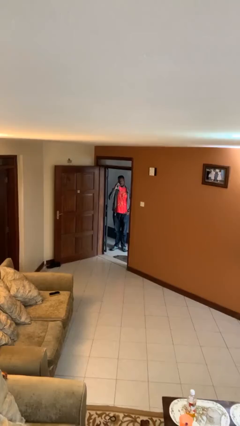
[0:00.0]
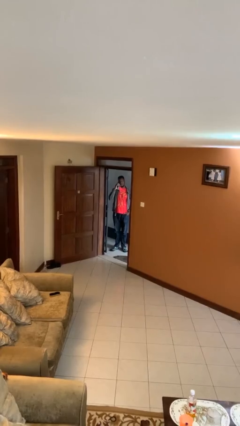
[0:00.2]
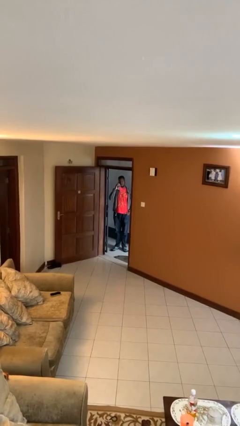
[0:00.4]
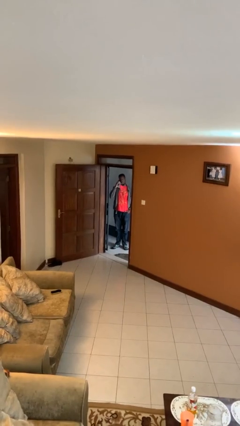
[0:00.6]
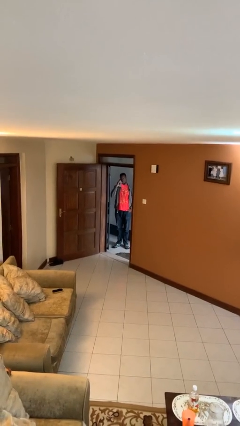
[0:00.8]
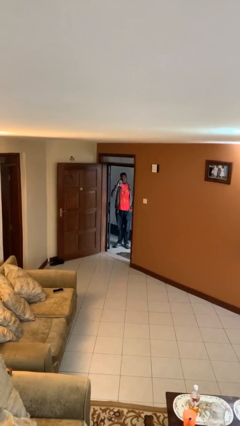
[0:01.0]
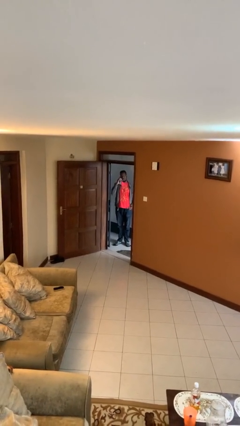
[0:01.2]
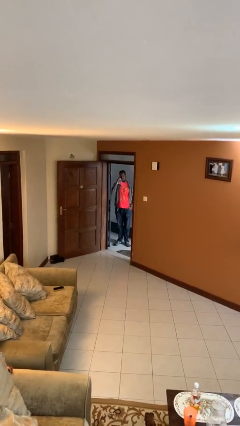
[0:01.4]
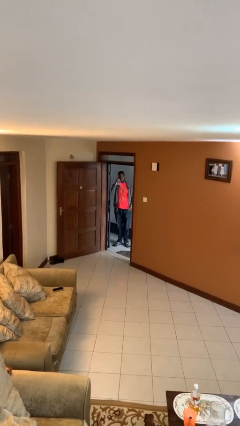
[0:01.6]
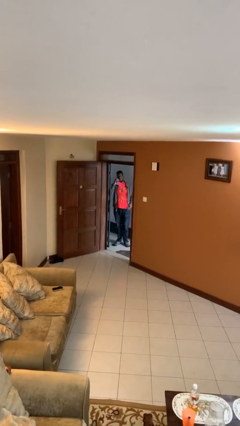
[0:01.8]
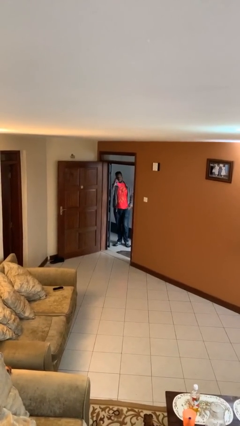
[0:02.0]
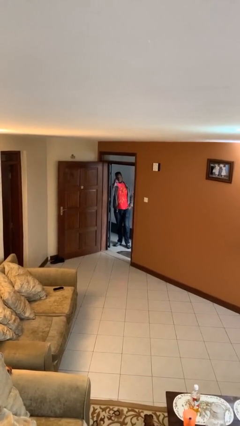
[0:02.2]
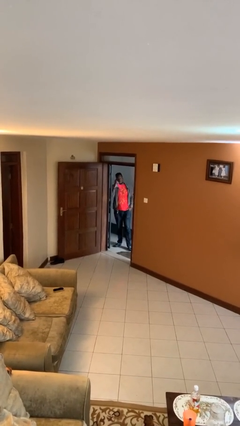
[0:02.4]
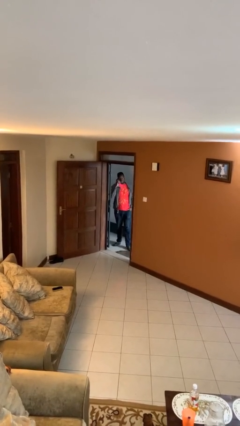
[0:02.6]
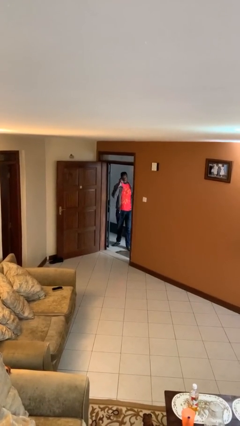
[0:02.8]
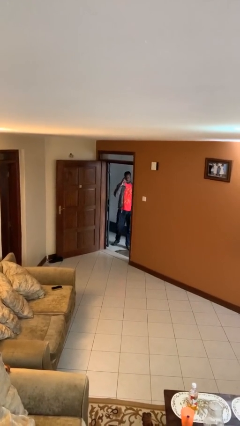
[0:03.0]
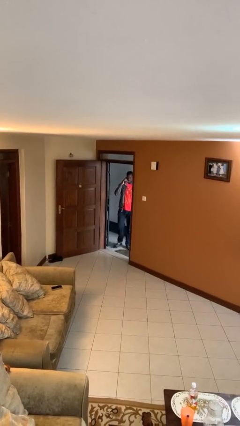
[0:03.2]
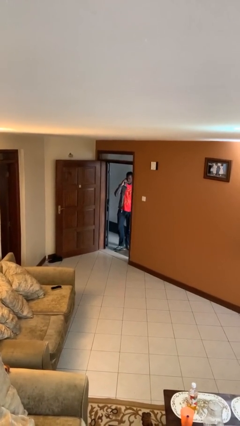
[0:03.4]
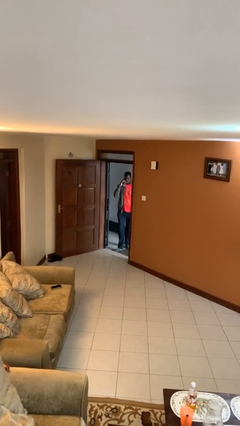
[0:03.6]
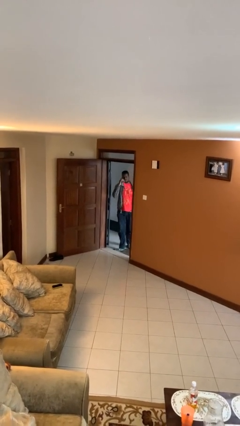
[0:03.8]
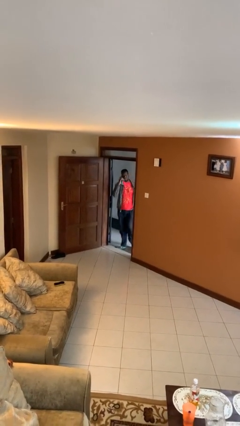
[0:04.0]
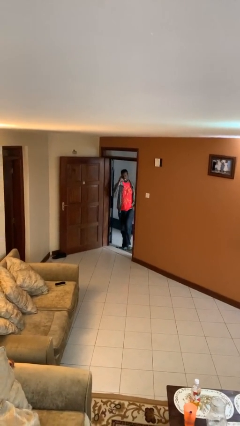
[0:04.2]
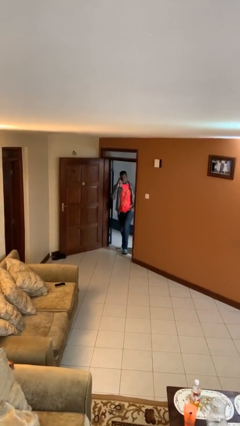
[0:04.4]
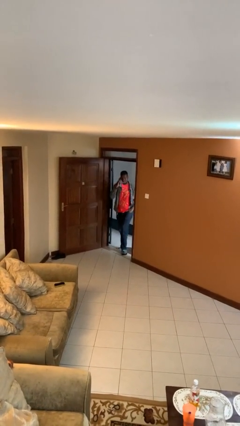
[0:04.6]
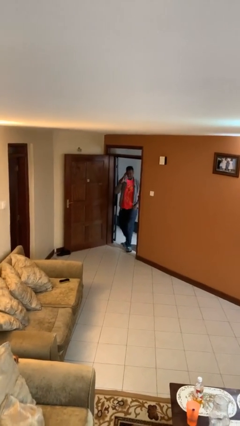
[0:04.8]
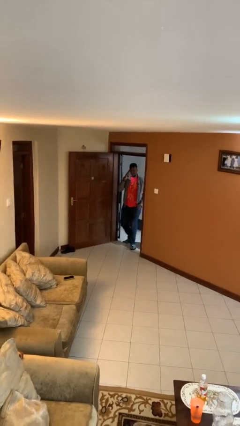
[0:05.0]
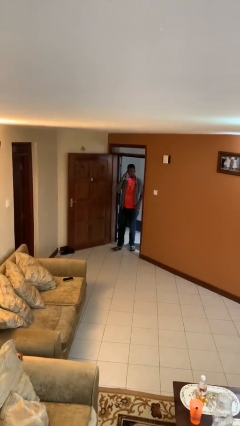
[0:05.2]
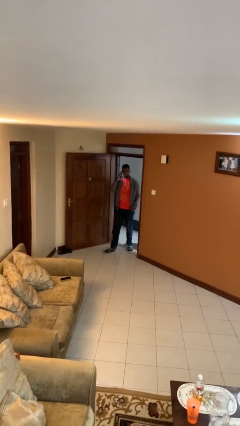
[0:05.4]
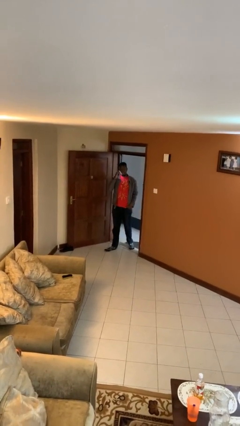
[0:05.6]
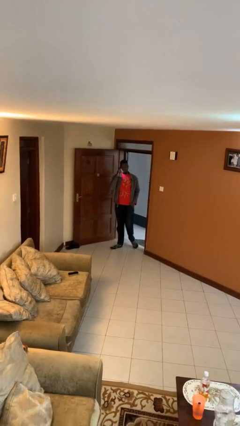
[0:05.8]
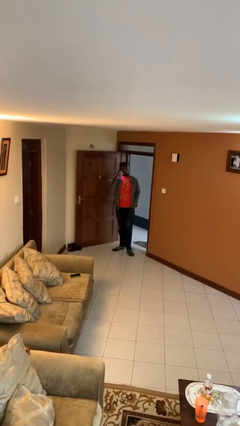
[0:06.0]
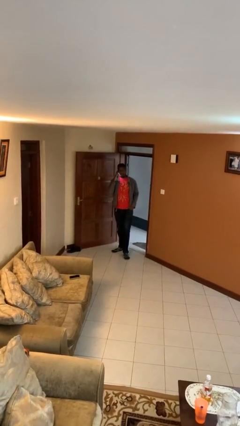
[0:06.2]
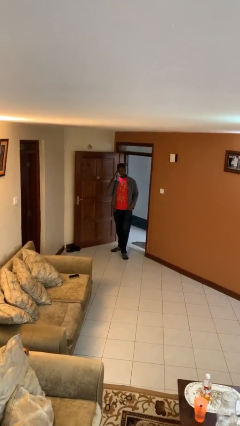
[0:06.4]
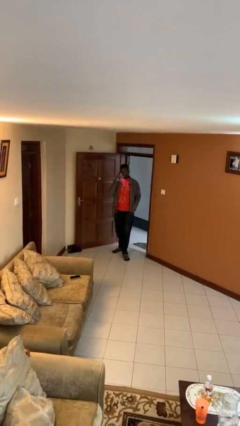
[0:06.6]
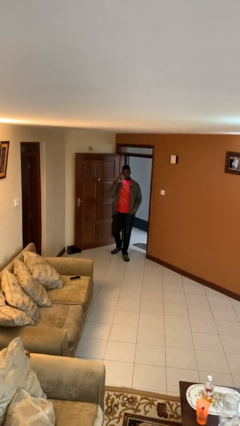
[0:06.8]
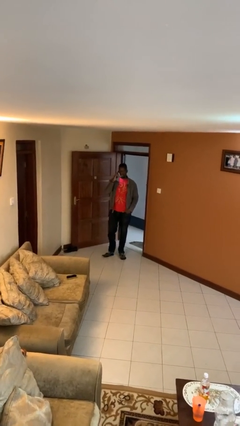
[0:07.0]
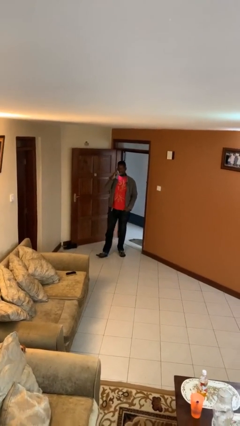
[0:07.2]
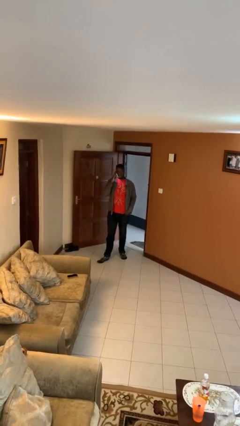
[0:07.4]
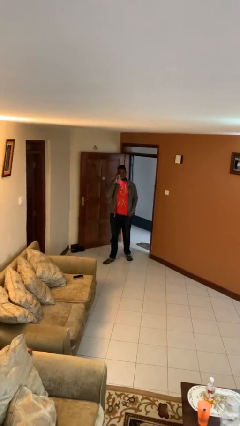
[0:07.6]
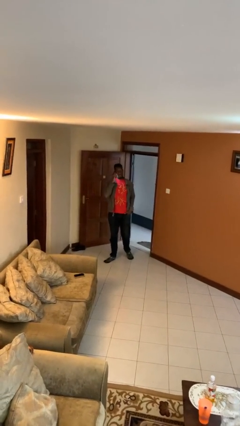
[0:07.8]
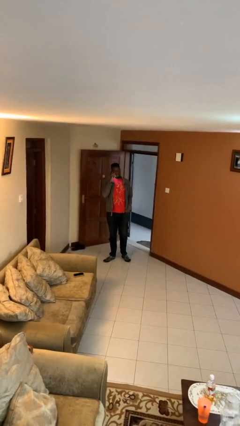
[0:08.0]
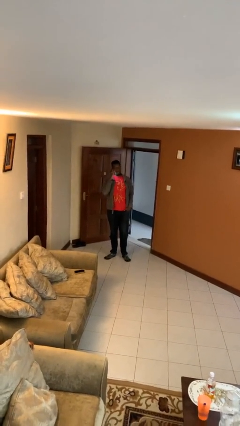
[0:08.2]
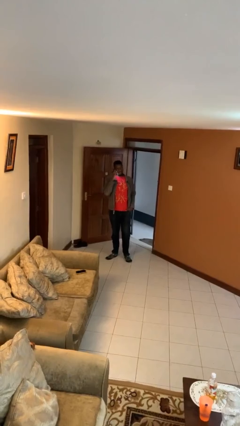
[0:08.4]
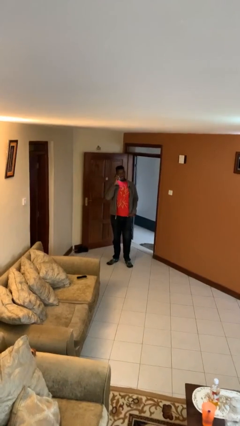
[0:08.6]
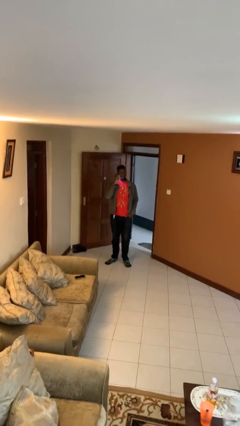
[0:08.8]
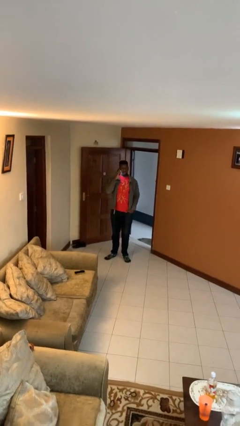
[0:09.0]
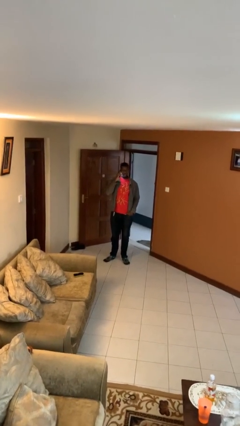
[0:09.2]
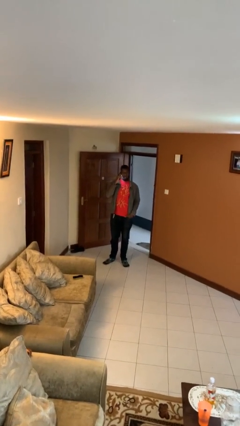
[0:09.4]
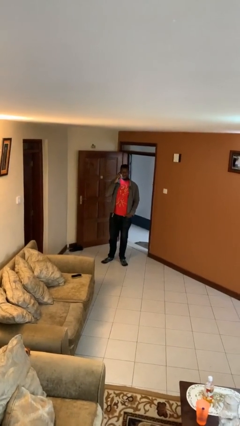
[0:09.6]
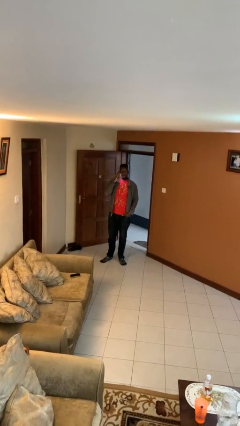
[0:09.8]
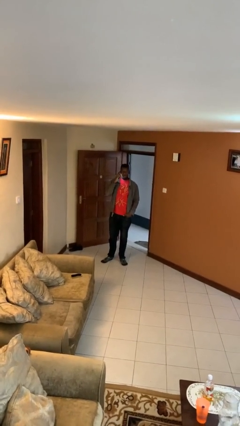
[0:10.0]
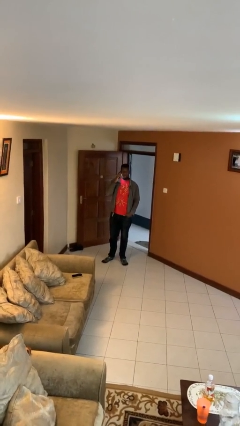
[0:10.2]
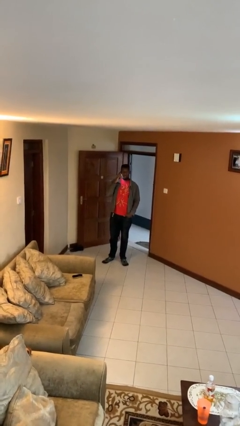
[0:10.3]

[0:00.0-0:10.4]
person enters scene through structure

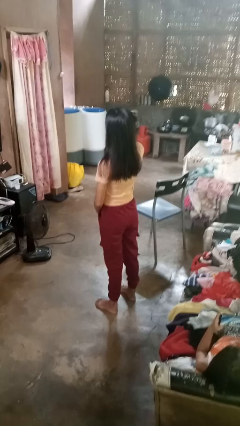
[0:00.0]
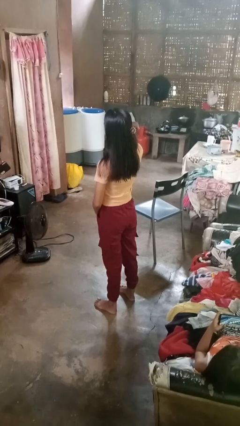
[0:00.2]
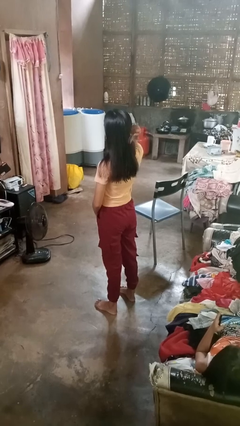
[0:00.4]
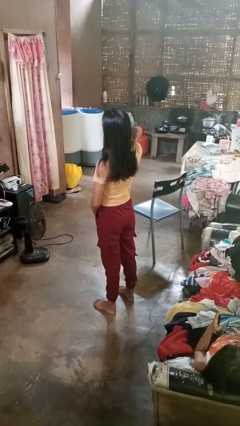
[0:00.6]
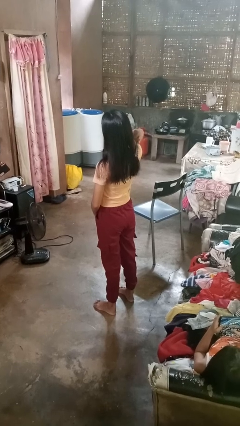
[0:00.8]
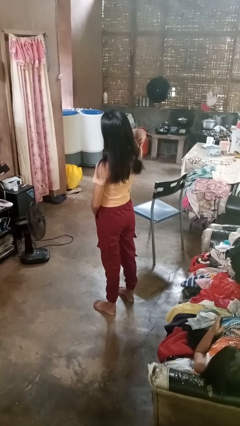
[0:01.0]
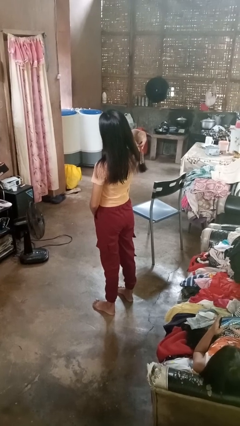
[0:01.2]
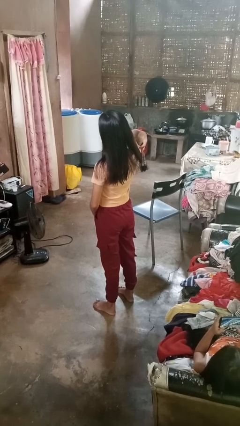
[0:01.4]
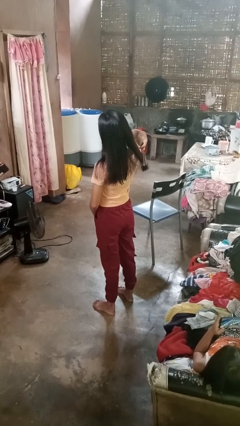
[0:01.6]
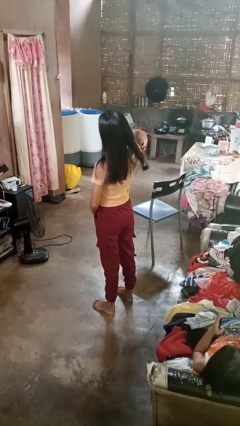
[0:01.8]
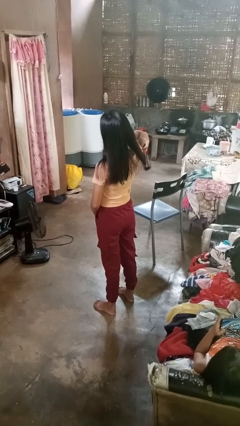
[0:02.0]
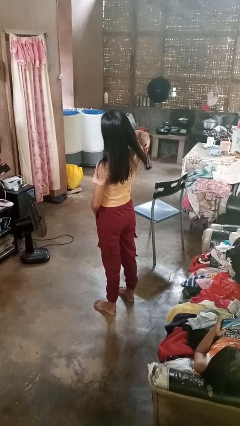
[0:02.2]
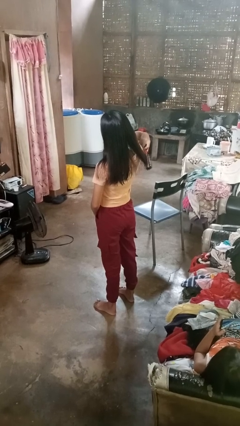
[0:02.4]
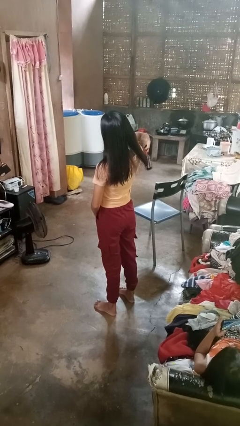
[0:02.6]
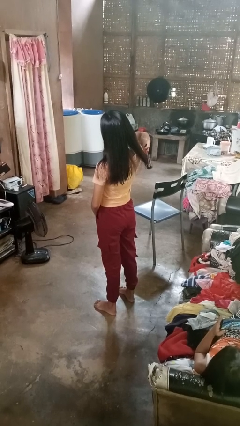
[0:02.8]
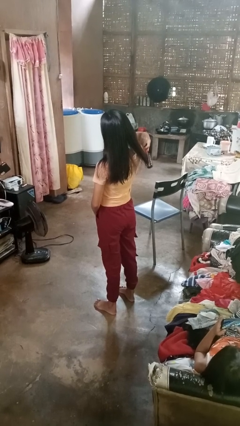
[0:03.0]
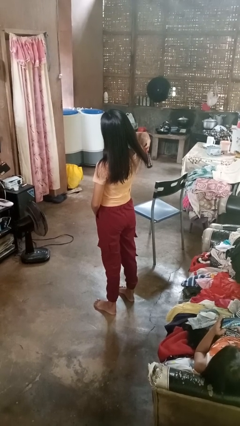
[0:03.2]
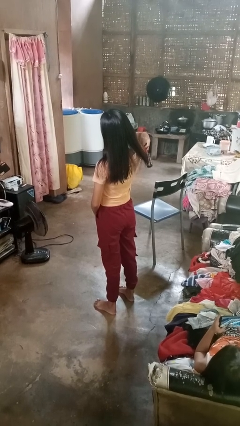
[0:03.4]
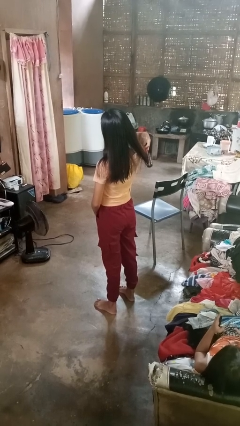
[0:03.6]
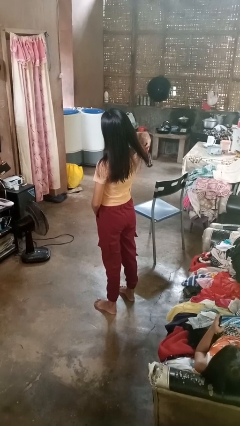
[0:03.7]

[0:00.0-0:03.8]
person brushes hair

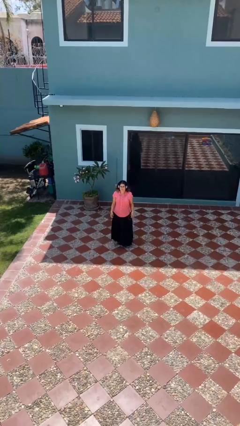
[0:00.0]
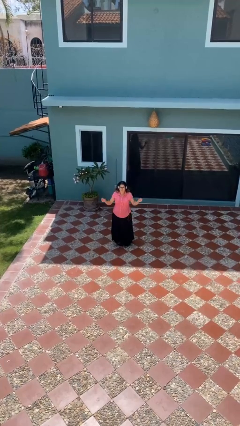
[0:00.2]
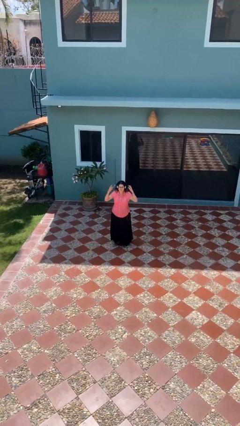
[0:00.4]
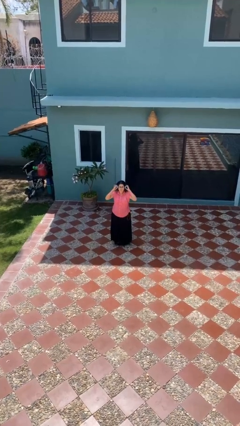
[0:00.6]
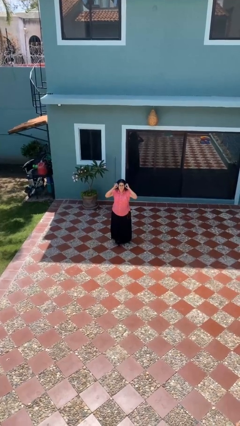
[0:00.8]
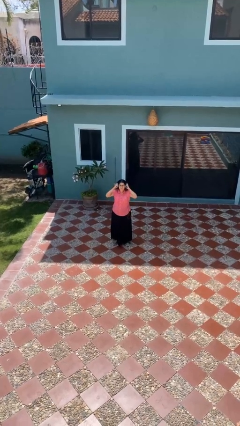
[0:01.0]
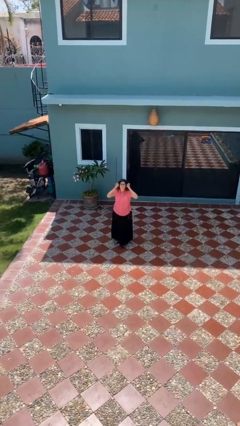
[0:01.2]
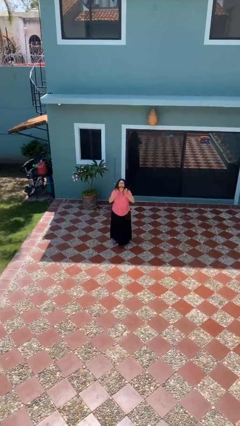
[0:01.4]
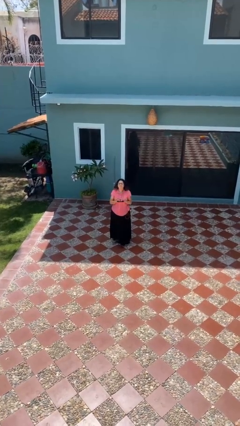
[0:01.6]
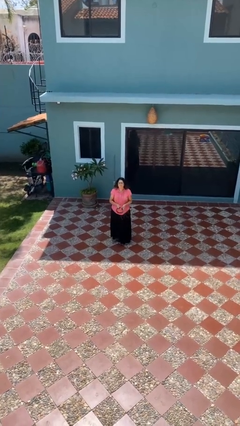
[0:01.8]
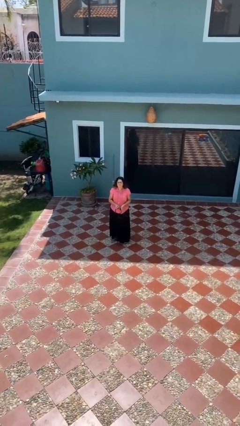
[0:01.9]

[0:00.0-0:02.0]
person takes off headphones

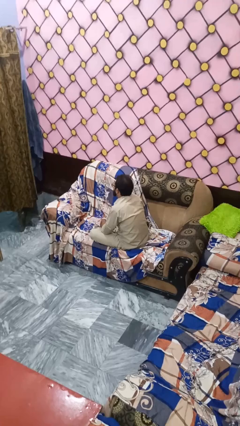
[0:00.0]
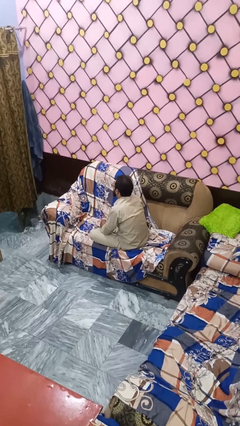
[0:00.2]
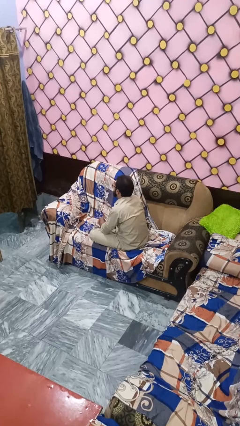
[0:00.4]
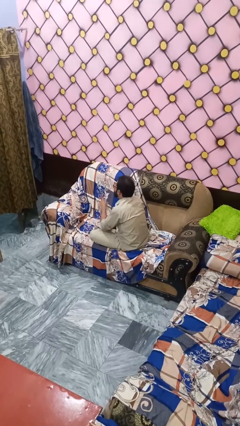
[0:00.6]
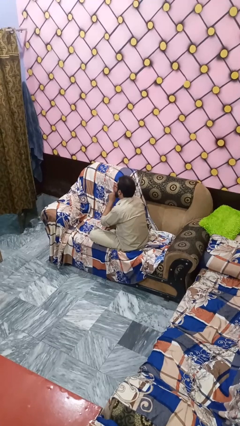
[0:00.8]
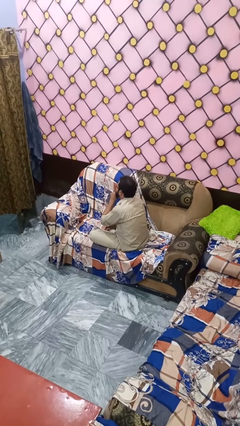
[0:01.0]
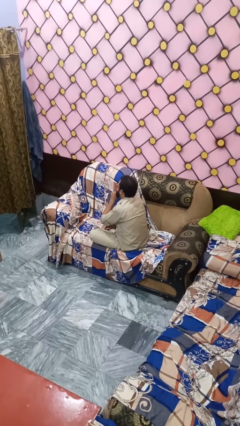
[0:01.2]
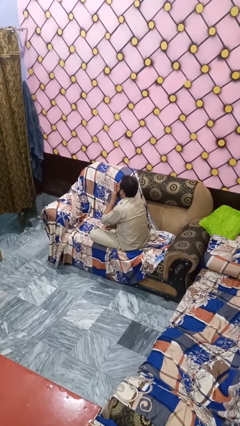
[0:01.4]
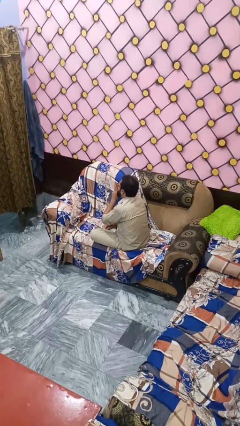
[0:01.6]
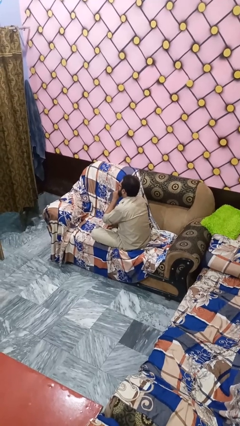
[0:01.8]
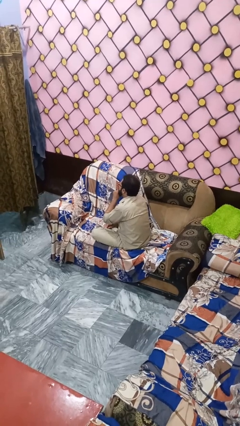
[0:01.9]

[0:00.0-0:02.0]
person gestures be quiet
